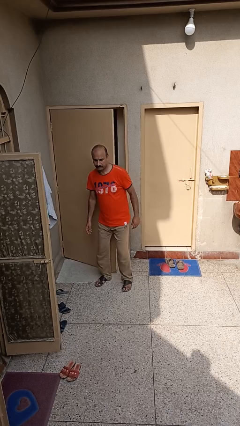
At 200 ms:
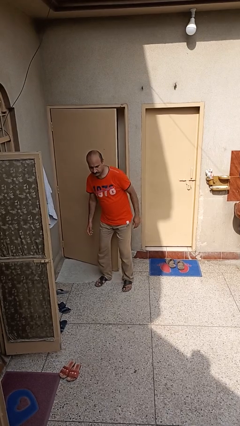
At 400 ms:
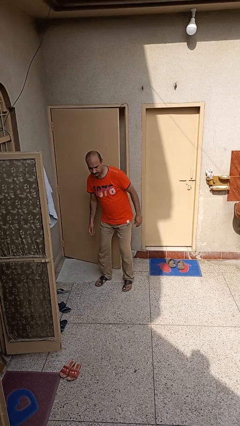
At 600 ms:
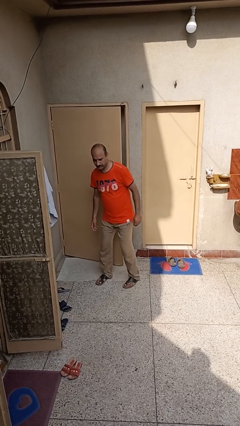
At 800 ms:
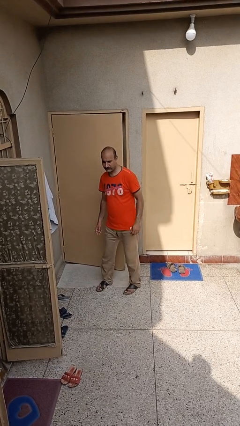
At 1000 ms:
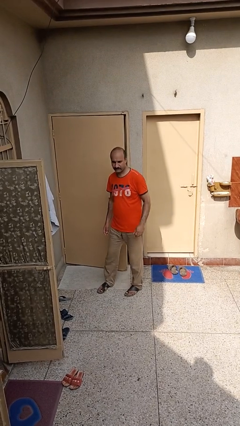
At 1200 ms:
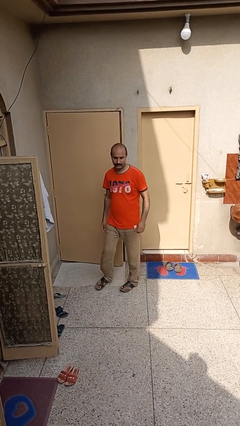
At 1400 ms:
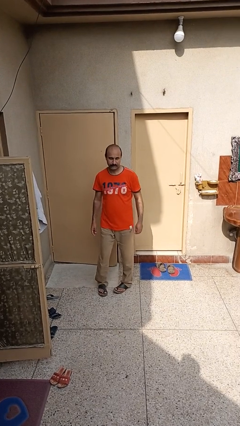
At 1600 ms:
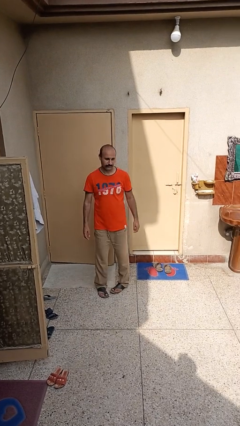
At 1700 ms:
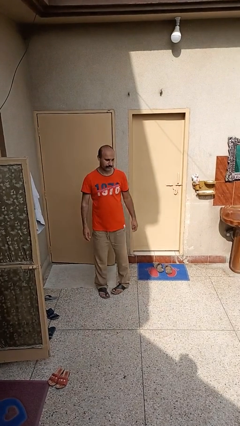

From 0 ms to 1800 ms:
person closes door with hip

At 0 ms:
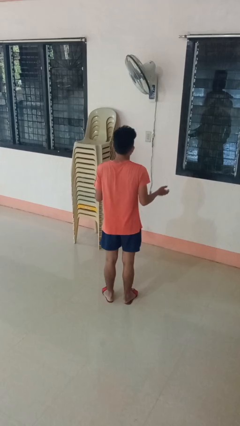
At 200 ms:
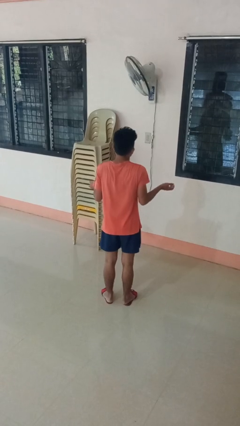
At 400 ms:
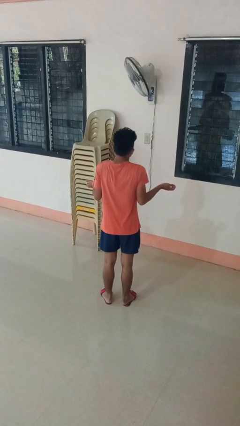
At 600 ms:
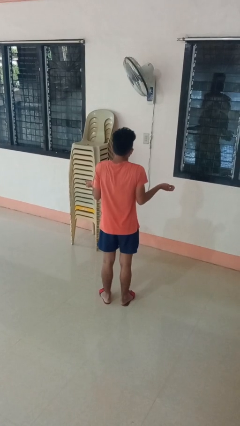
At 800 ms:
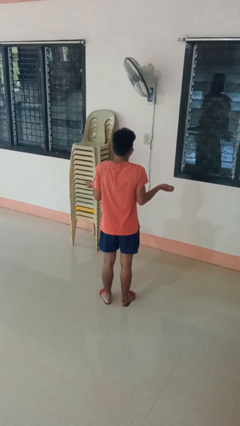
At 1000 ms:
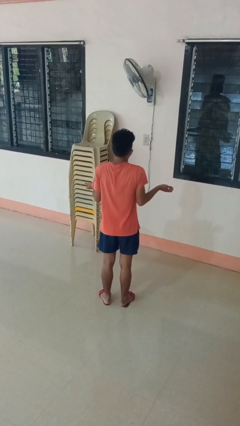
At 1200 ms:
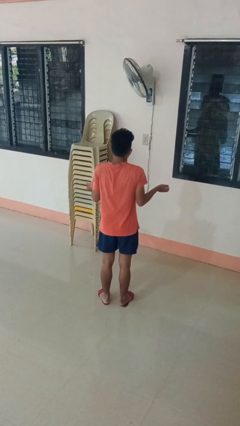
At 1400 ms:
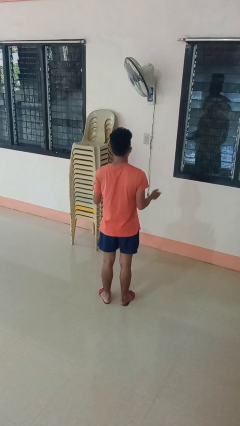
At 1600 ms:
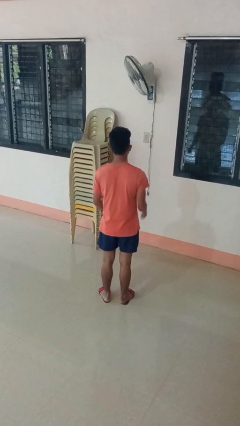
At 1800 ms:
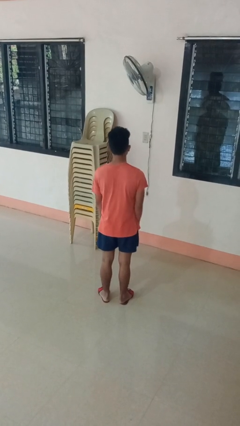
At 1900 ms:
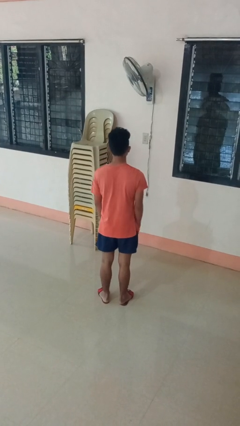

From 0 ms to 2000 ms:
person shrugs

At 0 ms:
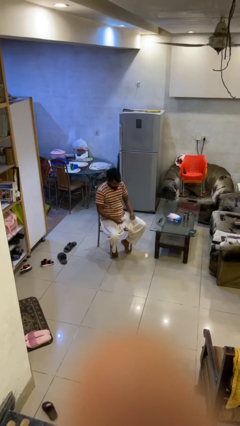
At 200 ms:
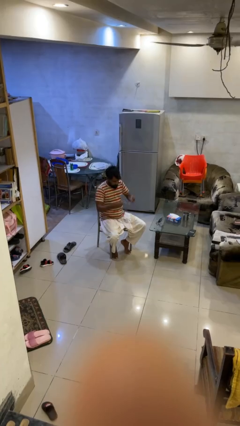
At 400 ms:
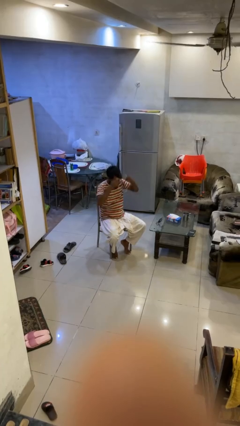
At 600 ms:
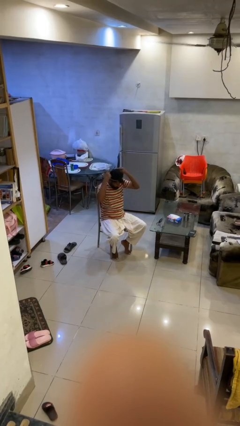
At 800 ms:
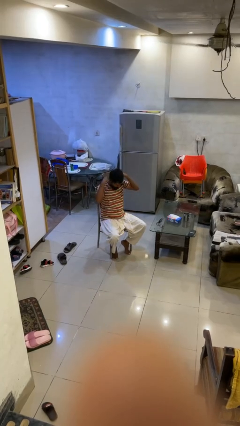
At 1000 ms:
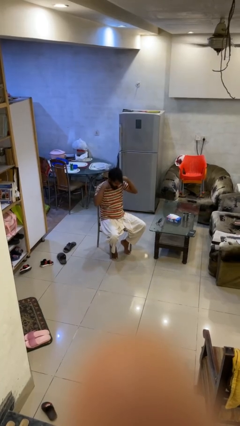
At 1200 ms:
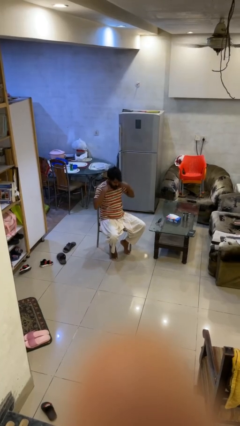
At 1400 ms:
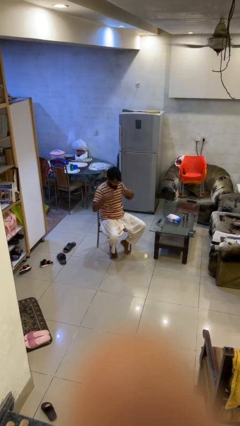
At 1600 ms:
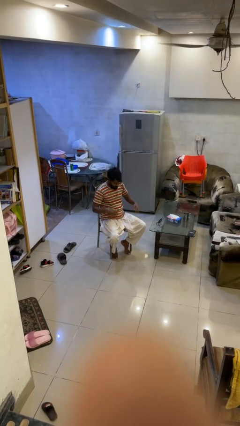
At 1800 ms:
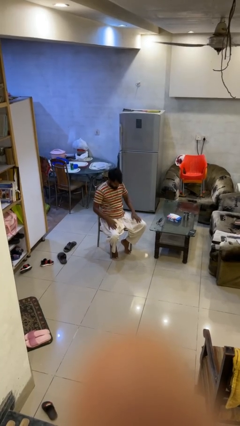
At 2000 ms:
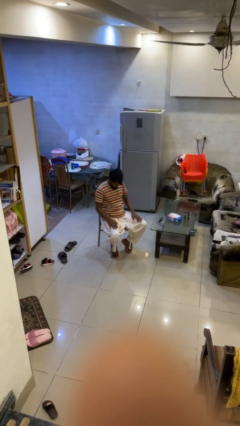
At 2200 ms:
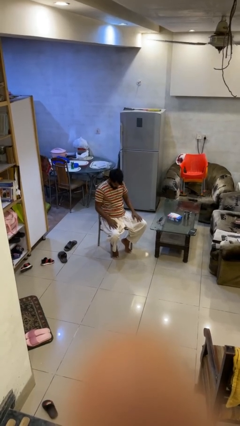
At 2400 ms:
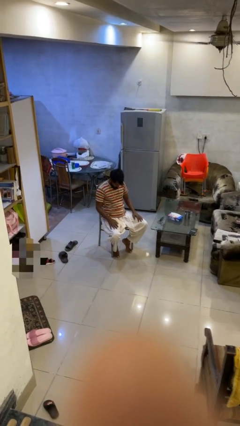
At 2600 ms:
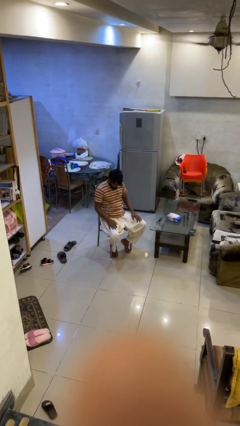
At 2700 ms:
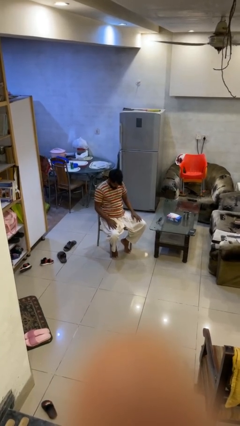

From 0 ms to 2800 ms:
person puts on necklace

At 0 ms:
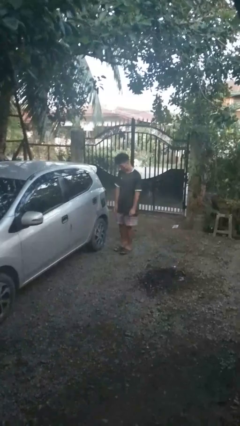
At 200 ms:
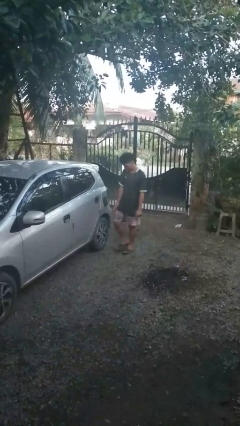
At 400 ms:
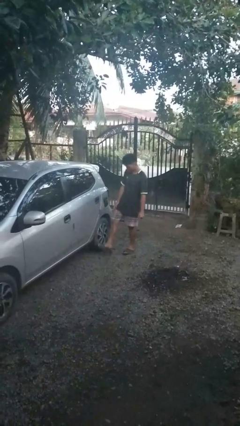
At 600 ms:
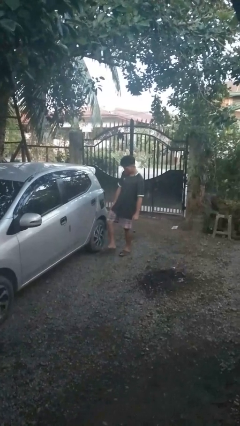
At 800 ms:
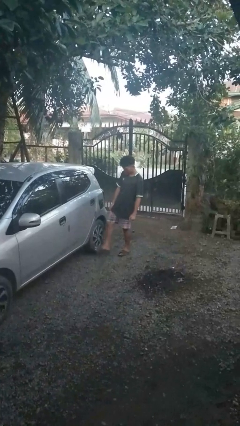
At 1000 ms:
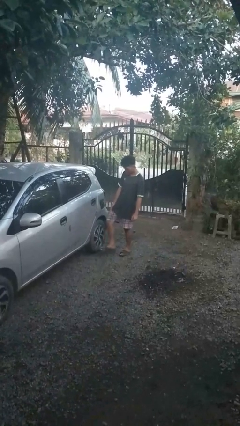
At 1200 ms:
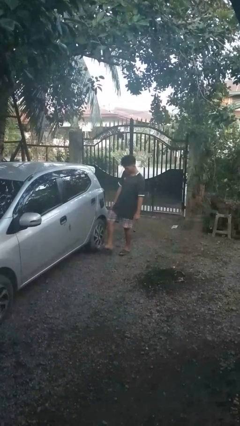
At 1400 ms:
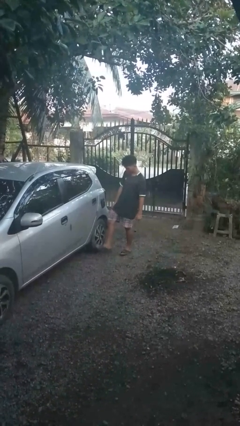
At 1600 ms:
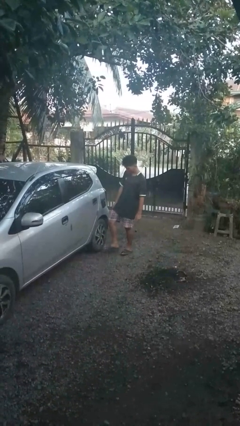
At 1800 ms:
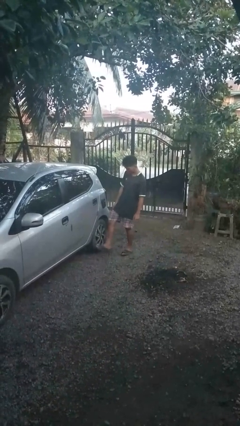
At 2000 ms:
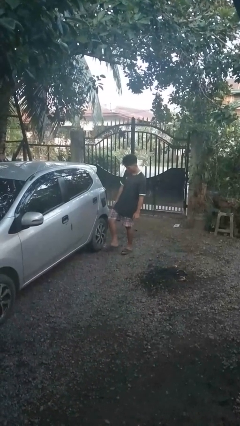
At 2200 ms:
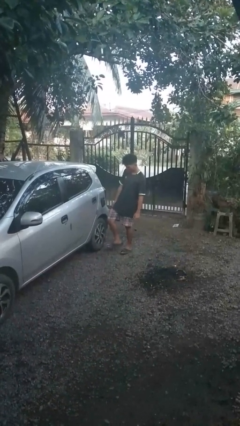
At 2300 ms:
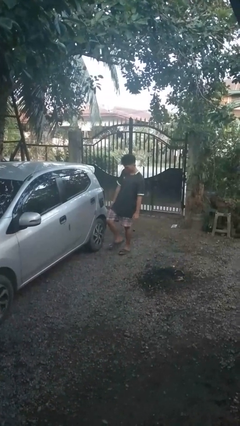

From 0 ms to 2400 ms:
person kicks car tires

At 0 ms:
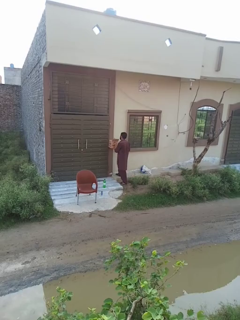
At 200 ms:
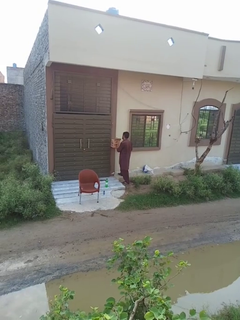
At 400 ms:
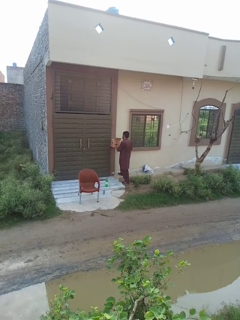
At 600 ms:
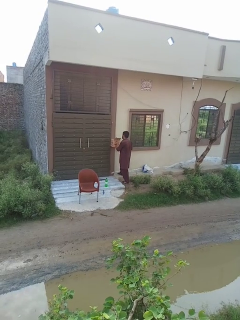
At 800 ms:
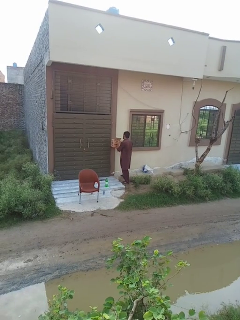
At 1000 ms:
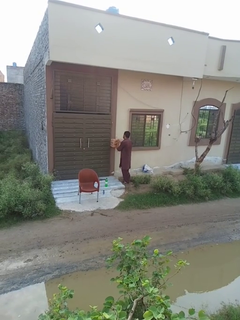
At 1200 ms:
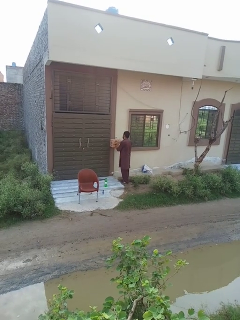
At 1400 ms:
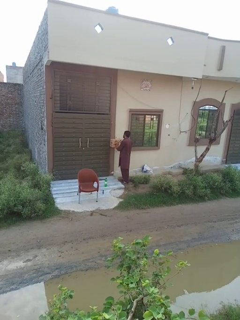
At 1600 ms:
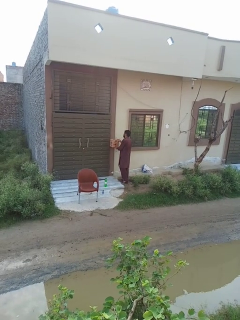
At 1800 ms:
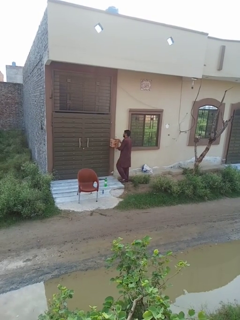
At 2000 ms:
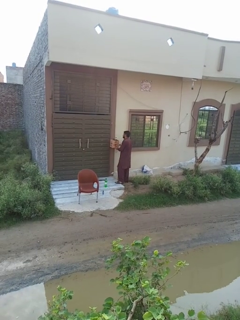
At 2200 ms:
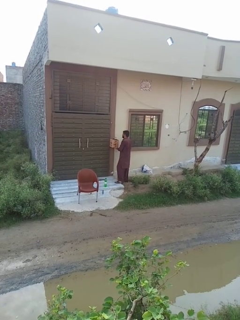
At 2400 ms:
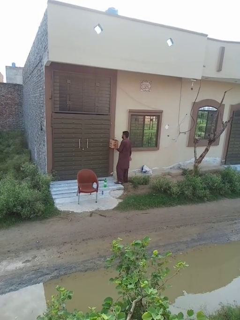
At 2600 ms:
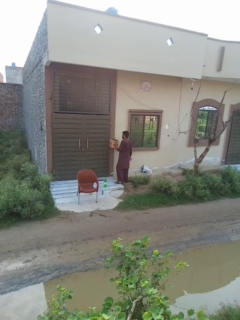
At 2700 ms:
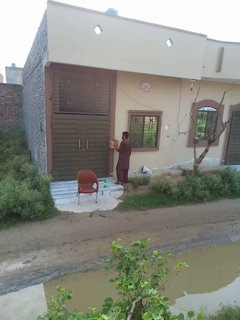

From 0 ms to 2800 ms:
person closes mailbox

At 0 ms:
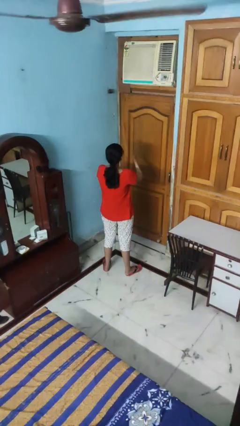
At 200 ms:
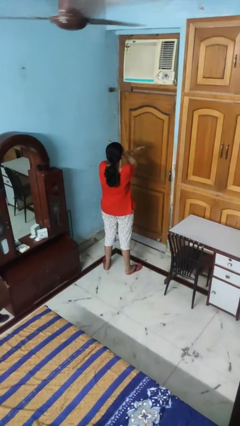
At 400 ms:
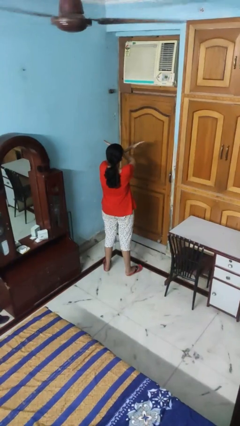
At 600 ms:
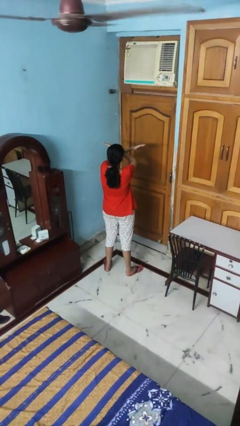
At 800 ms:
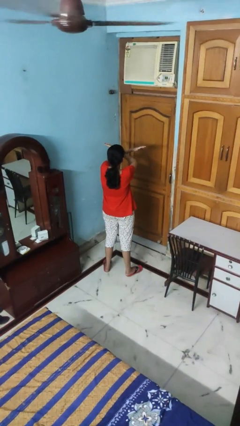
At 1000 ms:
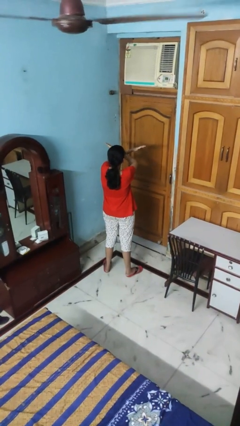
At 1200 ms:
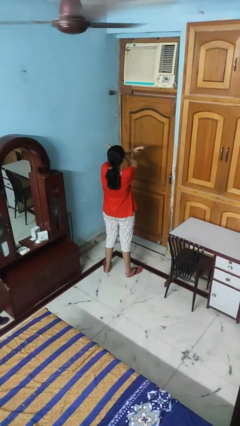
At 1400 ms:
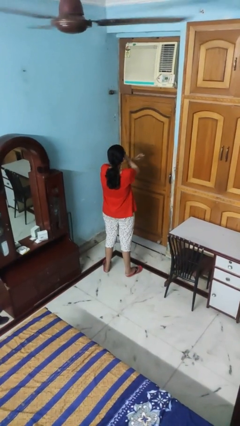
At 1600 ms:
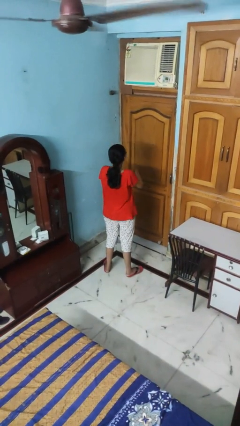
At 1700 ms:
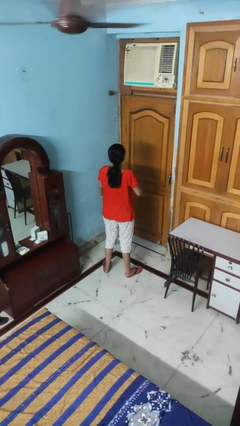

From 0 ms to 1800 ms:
person gestures arms x

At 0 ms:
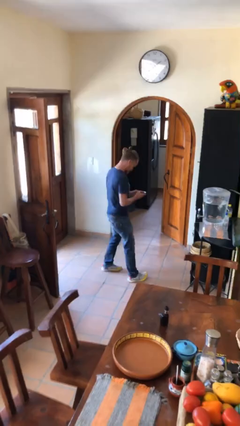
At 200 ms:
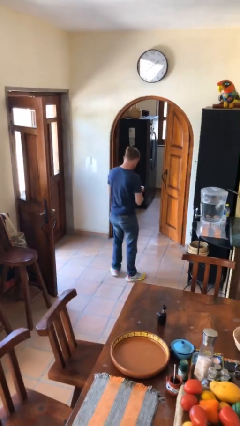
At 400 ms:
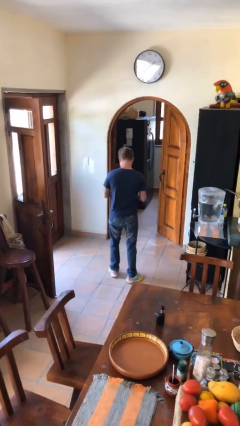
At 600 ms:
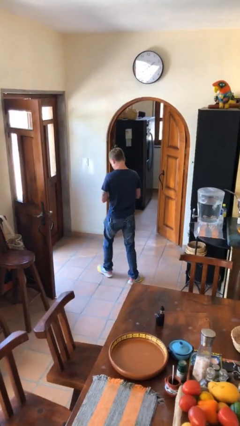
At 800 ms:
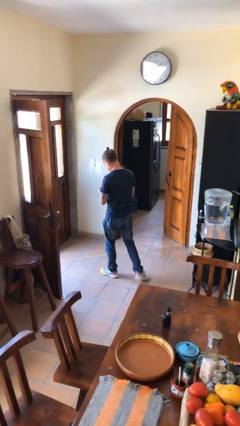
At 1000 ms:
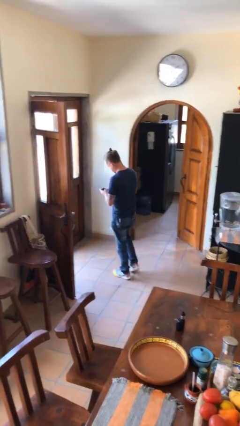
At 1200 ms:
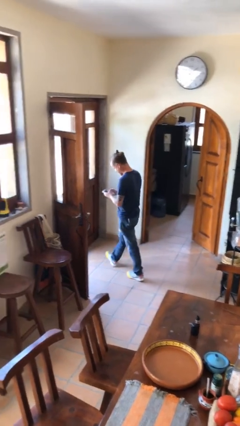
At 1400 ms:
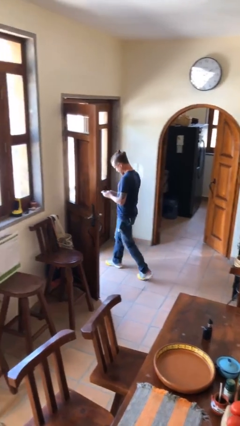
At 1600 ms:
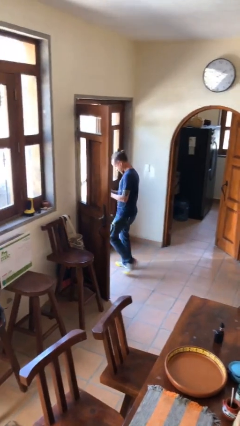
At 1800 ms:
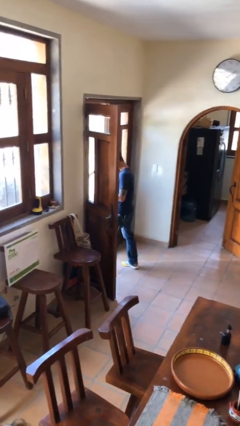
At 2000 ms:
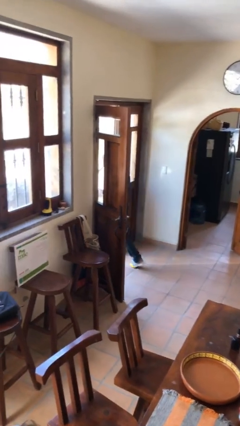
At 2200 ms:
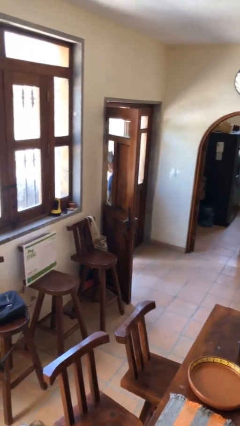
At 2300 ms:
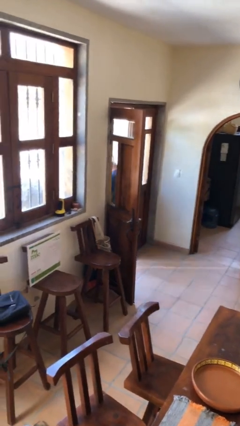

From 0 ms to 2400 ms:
person exits scene through structure

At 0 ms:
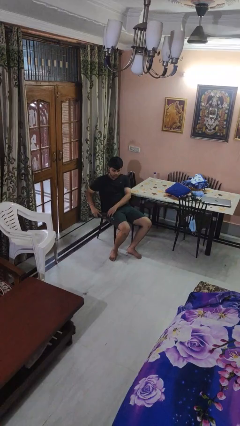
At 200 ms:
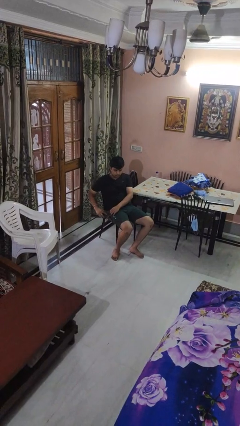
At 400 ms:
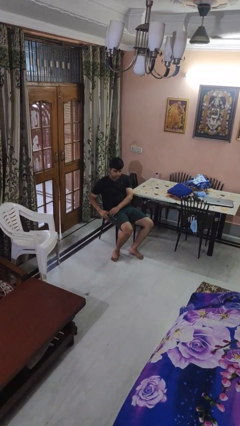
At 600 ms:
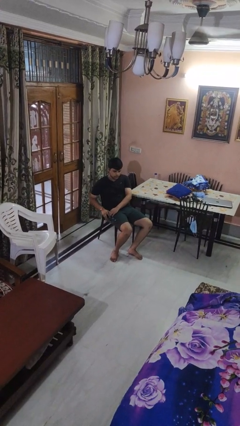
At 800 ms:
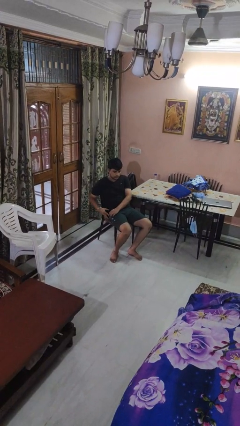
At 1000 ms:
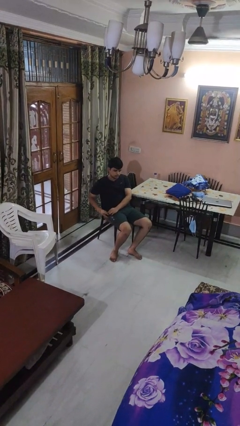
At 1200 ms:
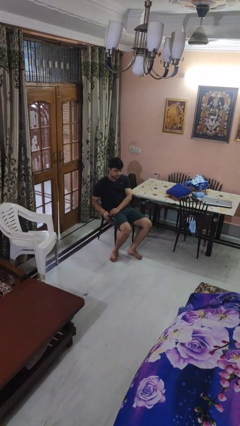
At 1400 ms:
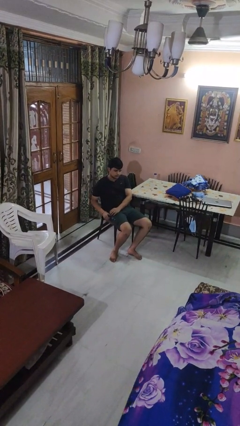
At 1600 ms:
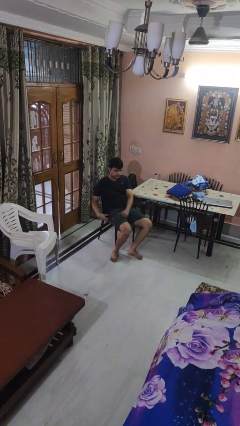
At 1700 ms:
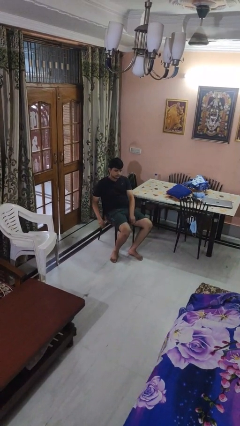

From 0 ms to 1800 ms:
person puts phone into pocket
